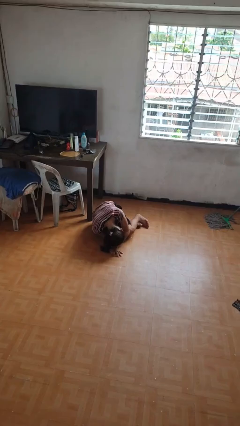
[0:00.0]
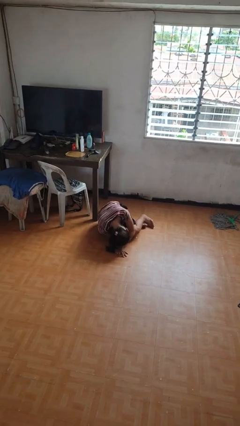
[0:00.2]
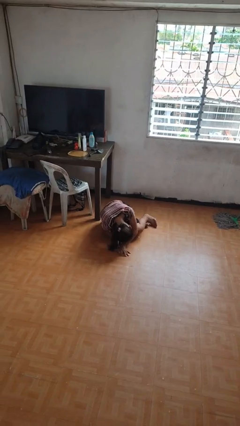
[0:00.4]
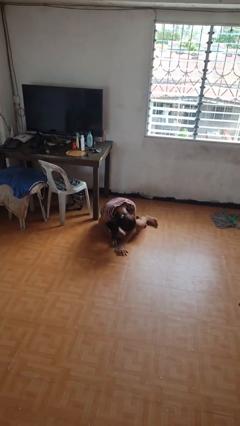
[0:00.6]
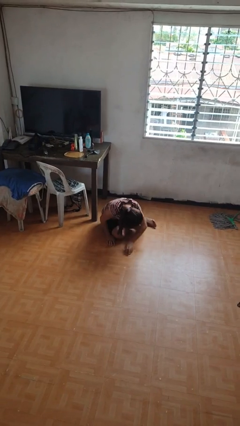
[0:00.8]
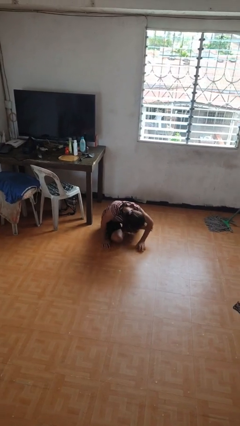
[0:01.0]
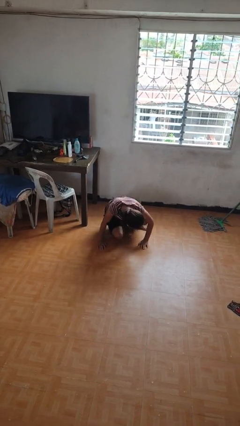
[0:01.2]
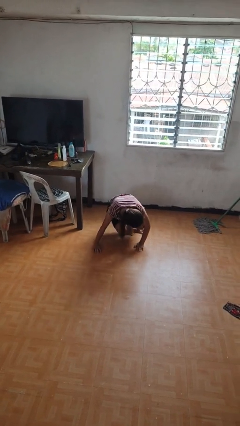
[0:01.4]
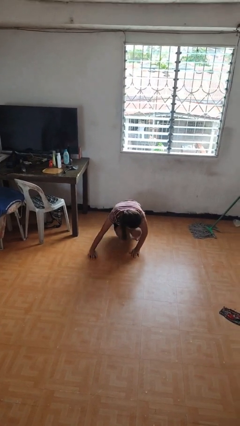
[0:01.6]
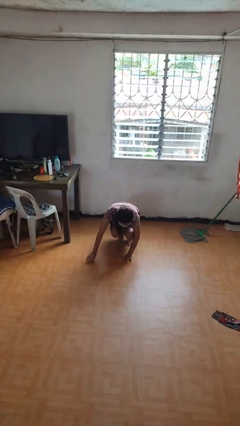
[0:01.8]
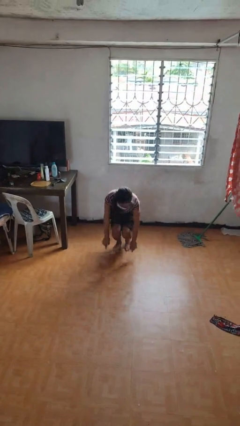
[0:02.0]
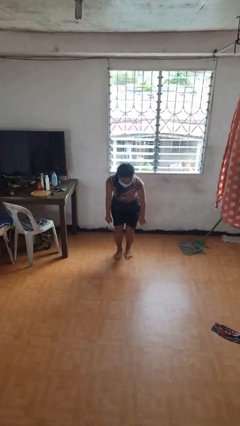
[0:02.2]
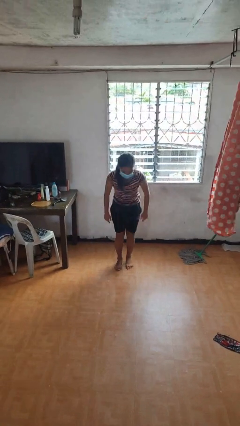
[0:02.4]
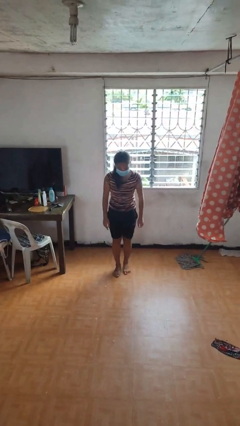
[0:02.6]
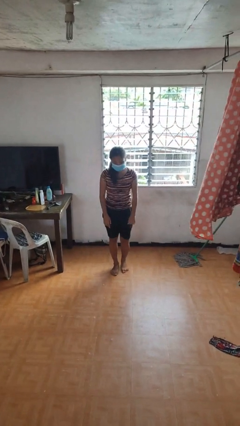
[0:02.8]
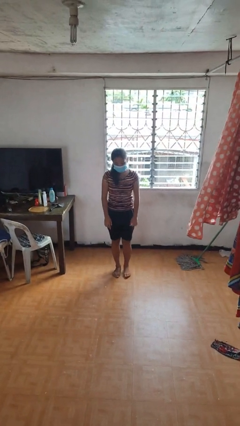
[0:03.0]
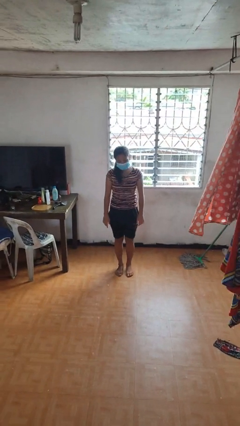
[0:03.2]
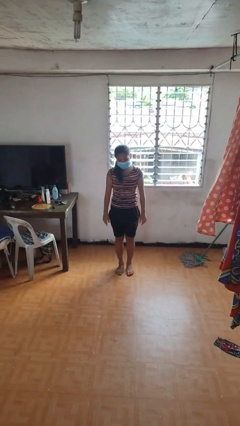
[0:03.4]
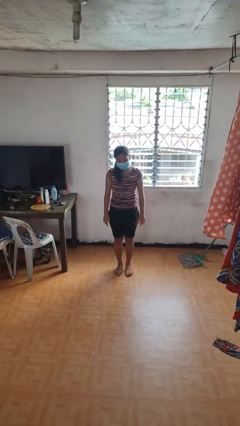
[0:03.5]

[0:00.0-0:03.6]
person stands up from floor

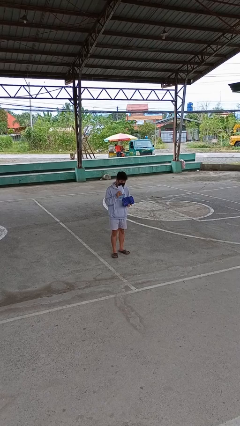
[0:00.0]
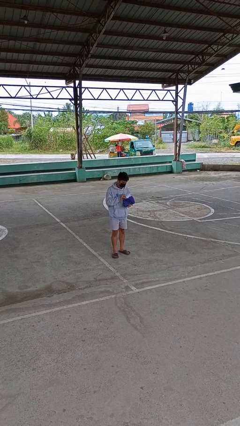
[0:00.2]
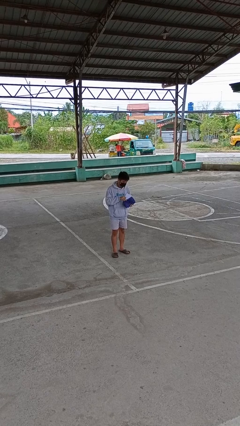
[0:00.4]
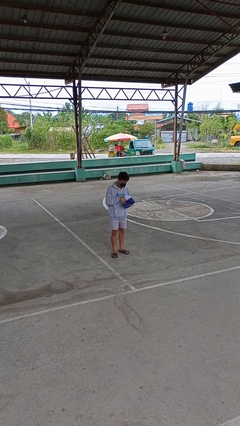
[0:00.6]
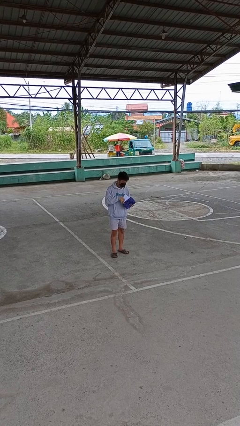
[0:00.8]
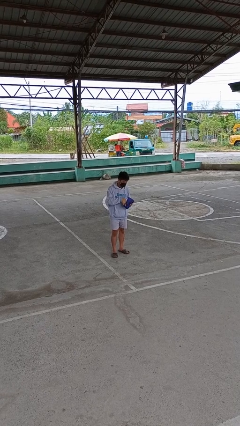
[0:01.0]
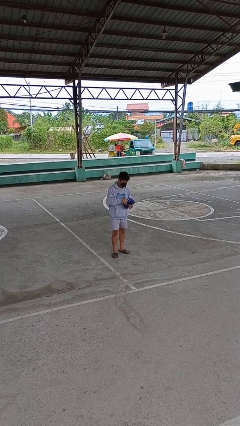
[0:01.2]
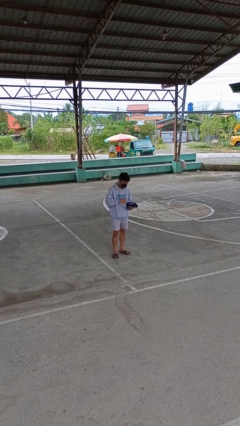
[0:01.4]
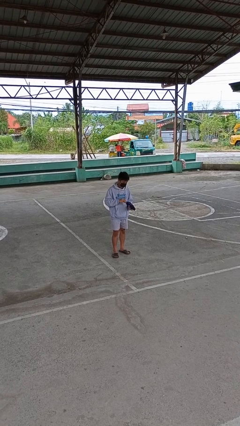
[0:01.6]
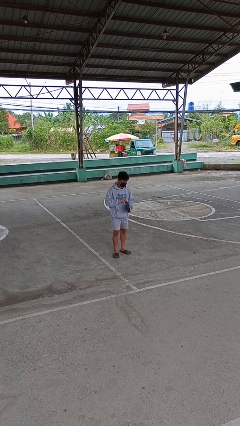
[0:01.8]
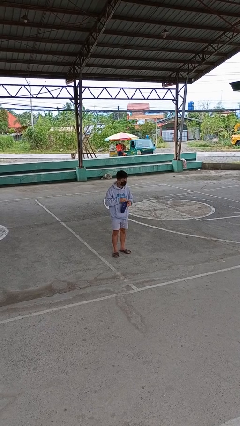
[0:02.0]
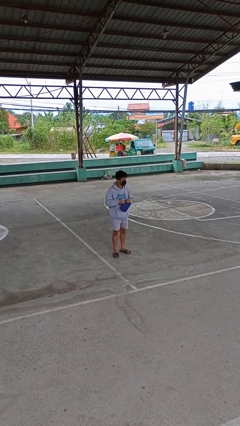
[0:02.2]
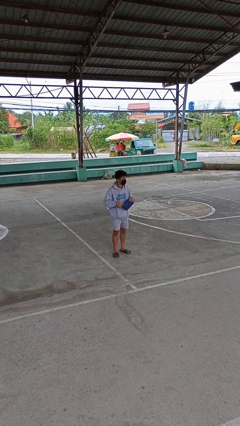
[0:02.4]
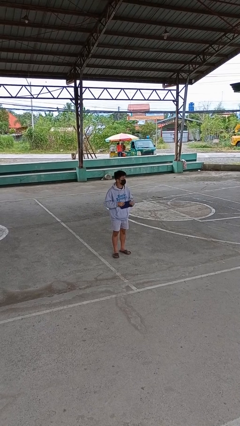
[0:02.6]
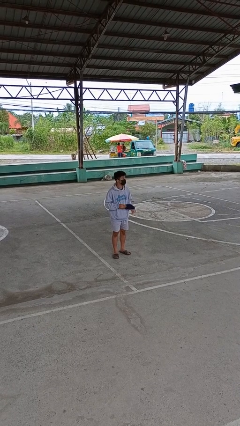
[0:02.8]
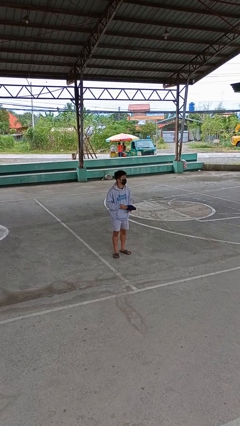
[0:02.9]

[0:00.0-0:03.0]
person puts object into purse

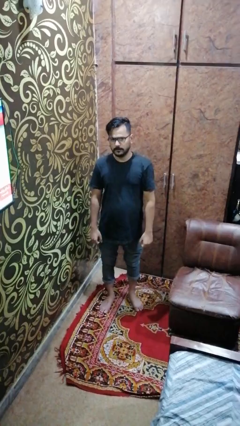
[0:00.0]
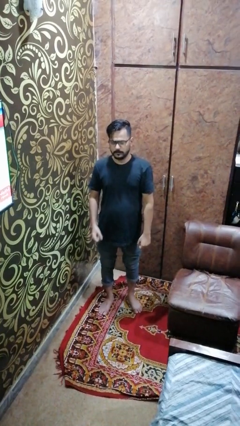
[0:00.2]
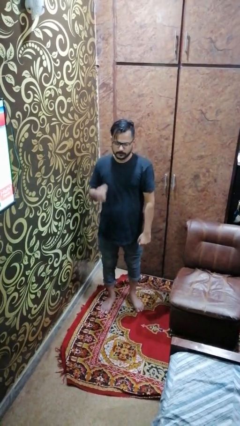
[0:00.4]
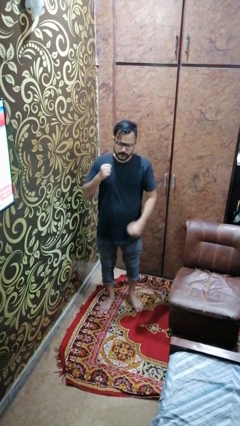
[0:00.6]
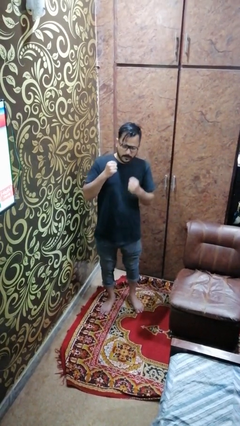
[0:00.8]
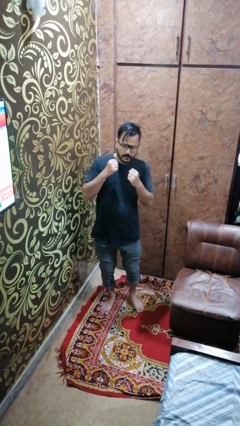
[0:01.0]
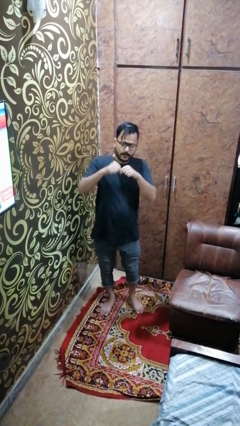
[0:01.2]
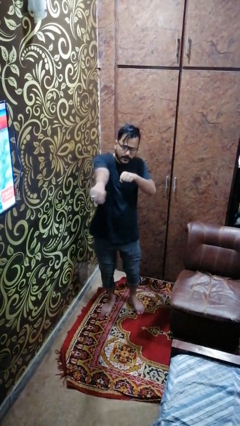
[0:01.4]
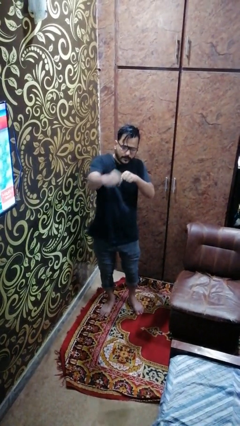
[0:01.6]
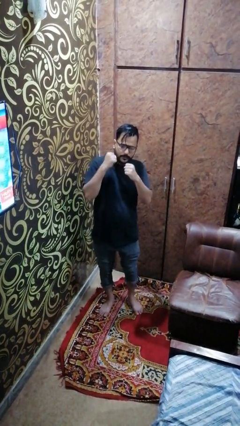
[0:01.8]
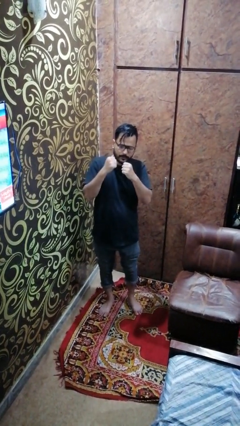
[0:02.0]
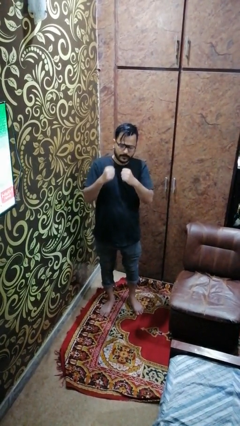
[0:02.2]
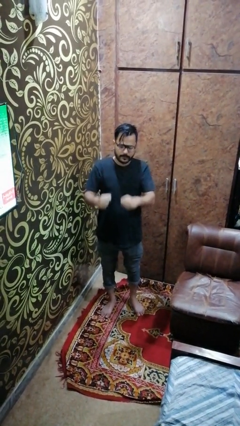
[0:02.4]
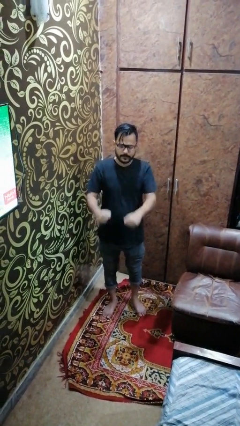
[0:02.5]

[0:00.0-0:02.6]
person punches

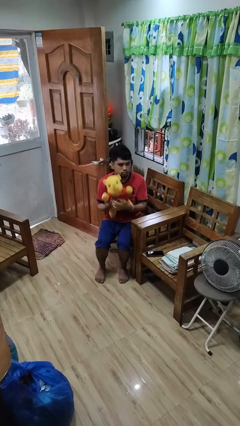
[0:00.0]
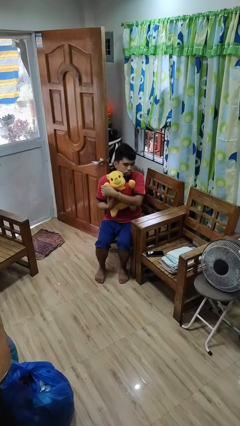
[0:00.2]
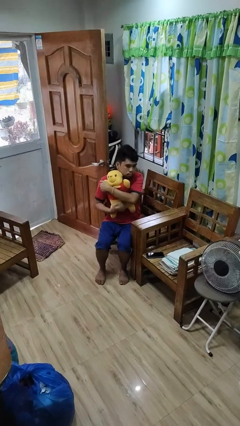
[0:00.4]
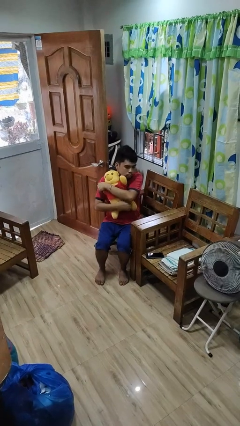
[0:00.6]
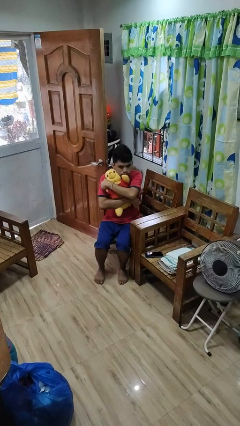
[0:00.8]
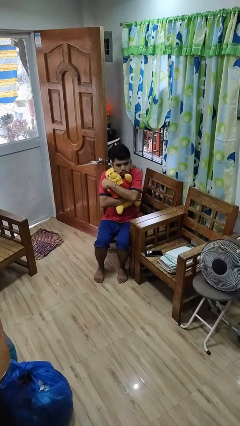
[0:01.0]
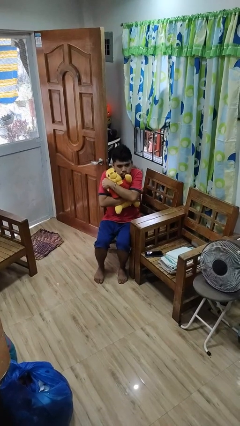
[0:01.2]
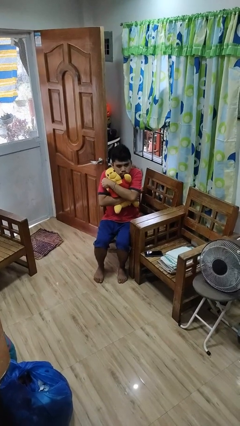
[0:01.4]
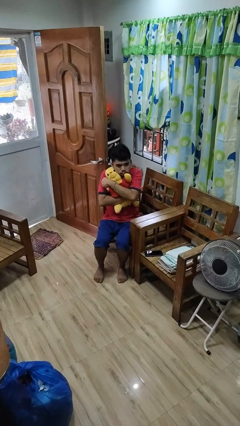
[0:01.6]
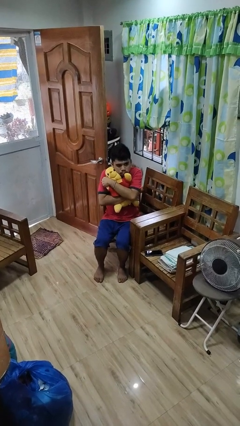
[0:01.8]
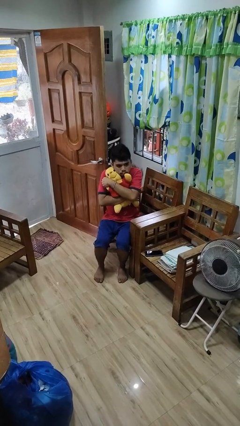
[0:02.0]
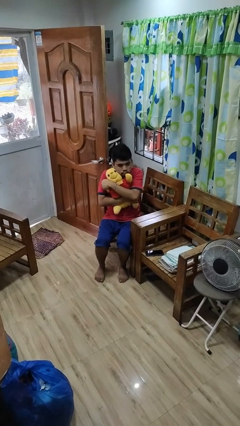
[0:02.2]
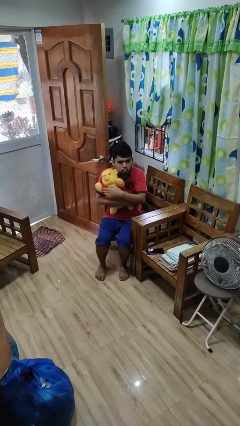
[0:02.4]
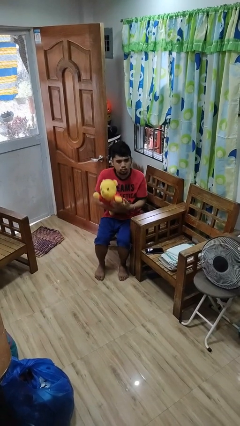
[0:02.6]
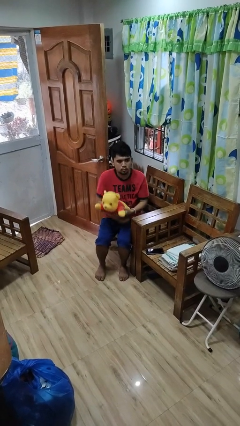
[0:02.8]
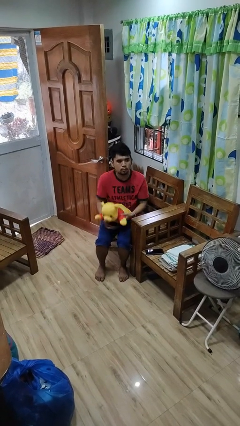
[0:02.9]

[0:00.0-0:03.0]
person hugs stuffed animal

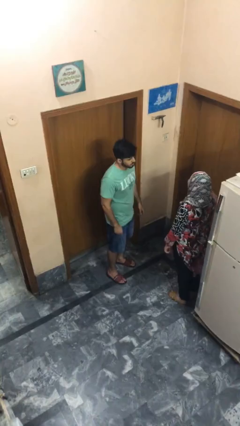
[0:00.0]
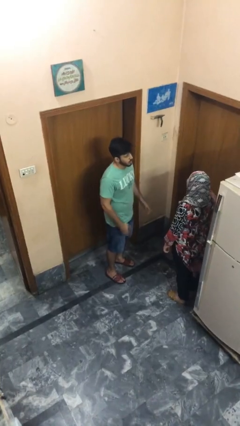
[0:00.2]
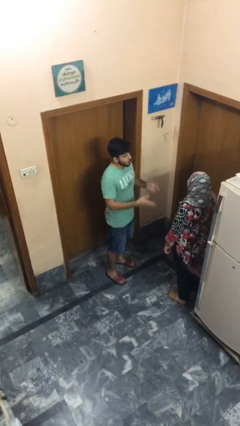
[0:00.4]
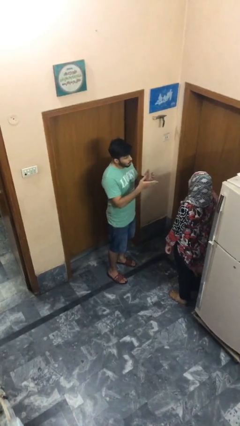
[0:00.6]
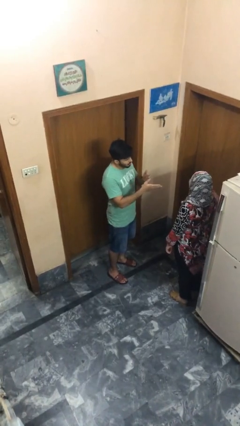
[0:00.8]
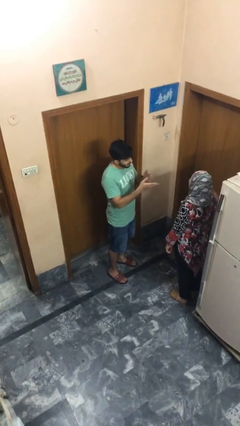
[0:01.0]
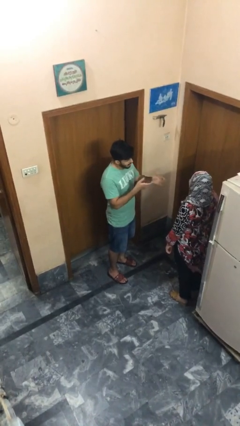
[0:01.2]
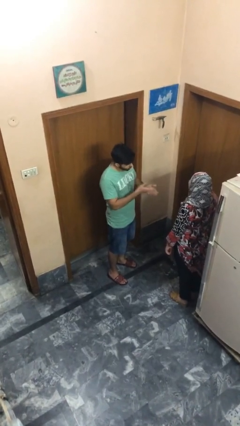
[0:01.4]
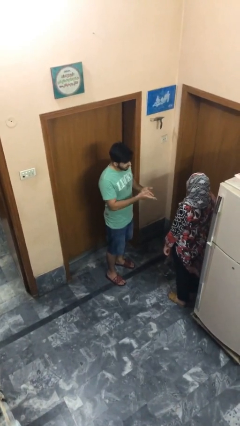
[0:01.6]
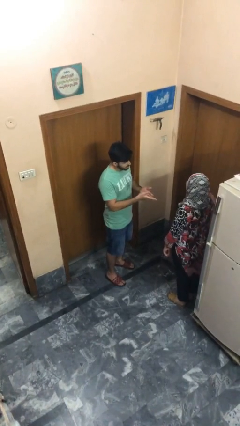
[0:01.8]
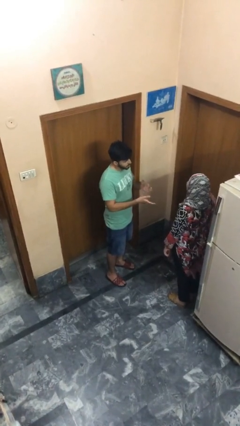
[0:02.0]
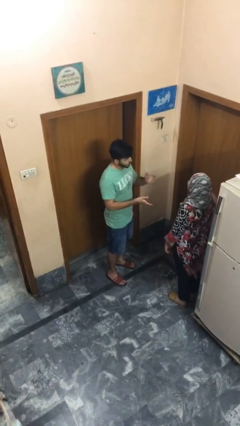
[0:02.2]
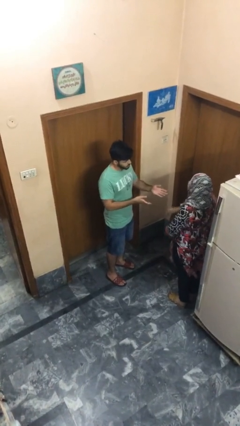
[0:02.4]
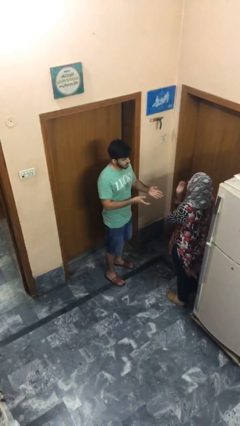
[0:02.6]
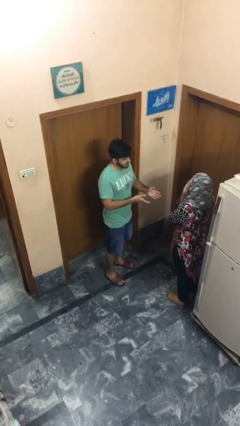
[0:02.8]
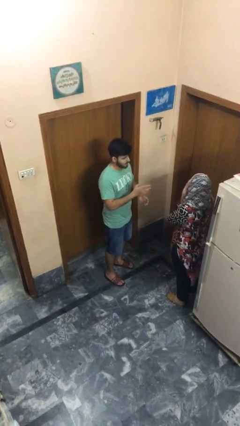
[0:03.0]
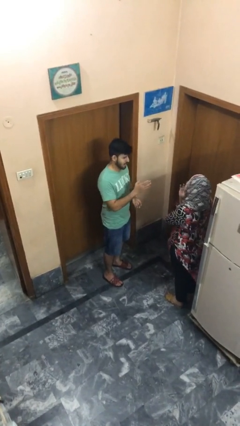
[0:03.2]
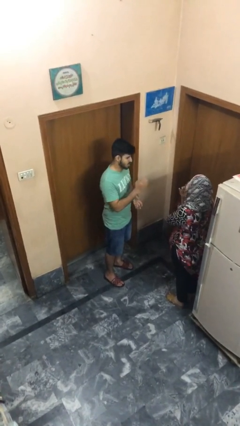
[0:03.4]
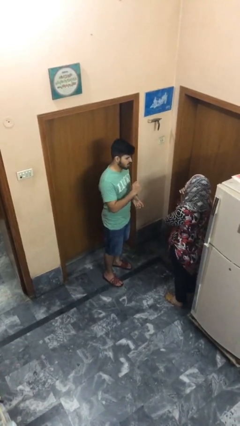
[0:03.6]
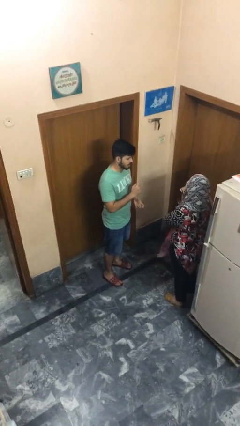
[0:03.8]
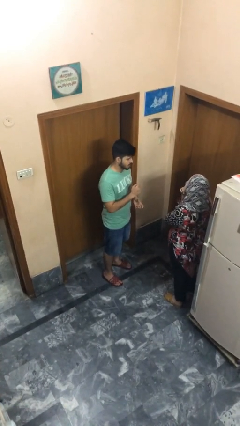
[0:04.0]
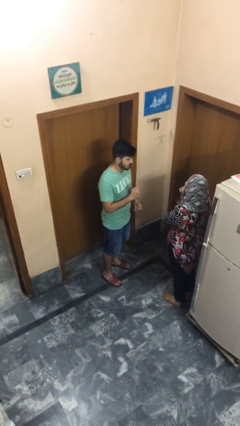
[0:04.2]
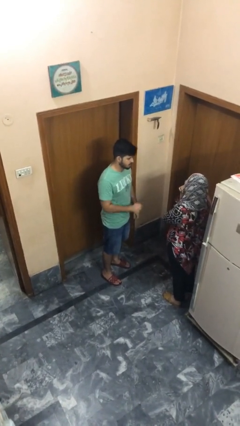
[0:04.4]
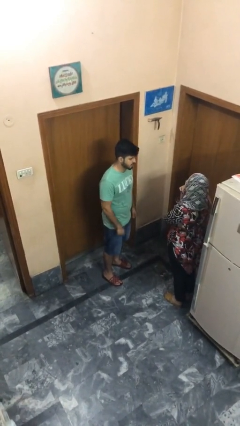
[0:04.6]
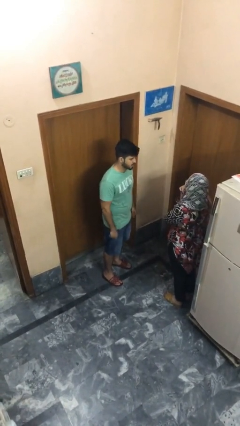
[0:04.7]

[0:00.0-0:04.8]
person talks to person

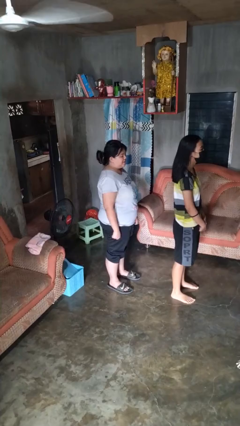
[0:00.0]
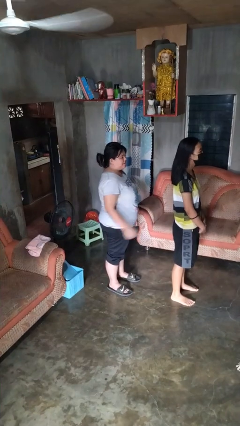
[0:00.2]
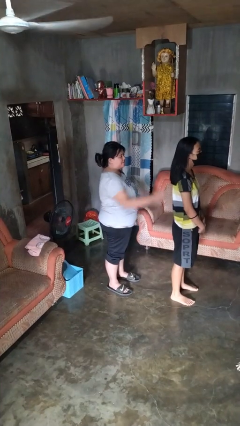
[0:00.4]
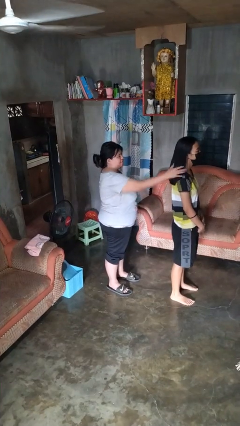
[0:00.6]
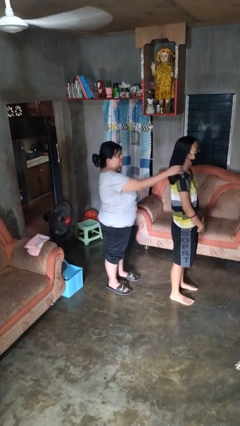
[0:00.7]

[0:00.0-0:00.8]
person grabs person by hair
